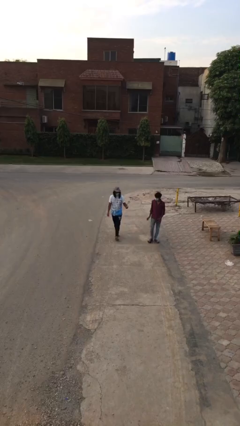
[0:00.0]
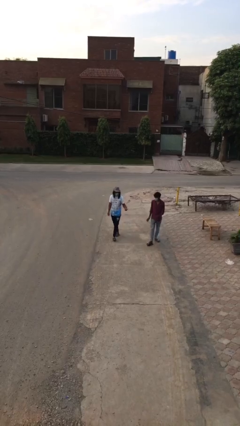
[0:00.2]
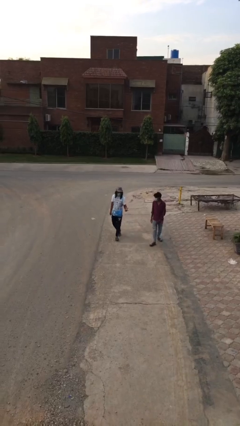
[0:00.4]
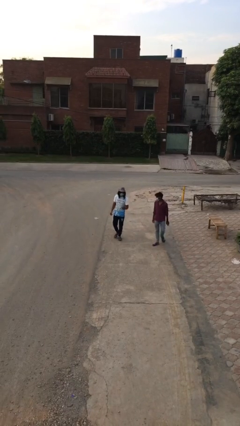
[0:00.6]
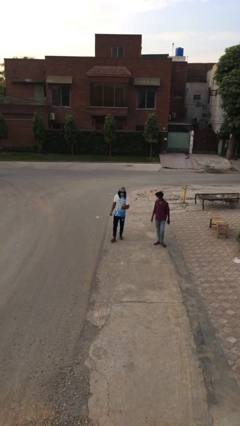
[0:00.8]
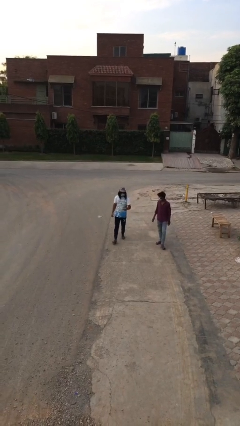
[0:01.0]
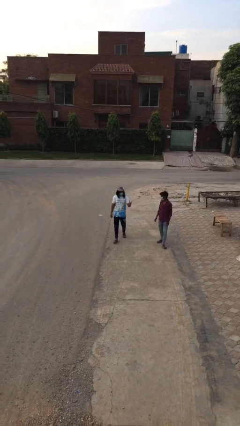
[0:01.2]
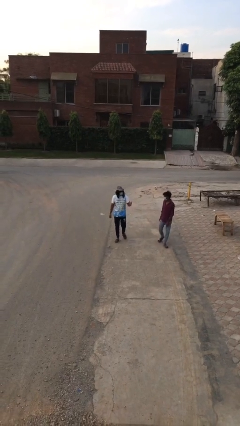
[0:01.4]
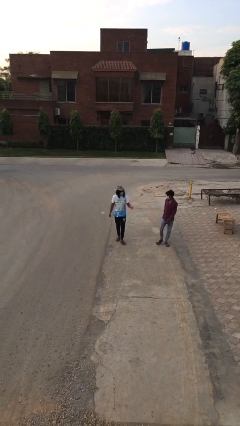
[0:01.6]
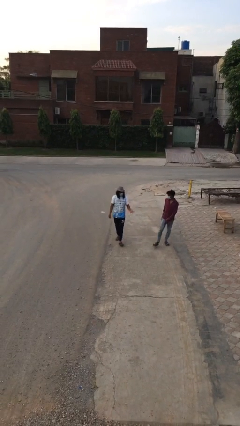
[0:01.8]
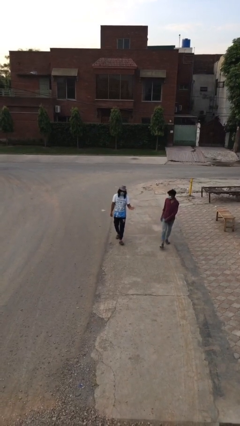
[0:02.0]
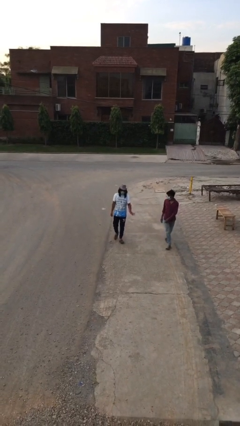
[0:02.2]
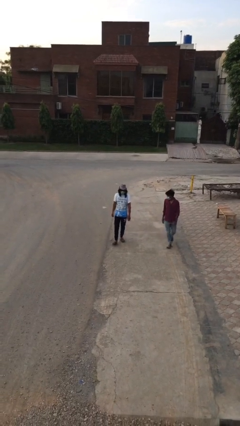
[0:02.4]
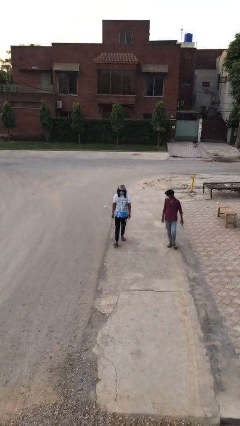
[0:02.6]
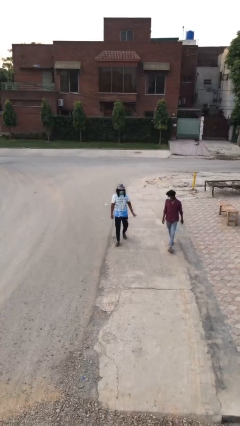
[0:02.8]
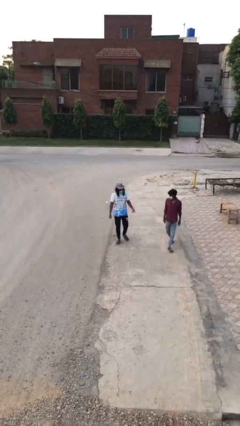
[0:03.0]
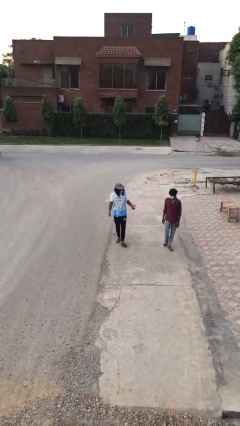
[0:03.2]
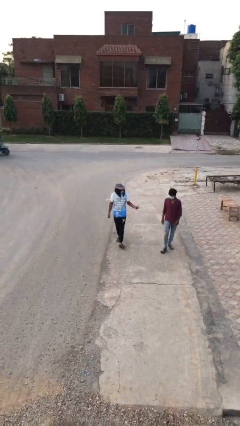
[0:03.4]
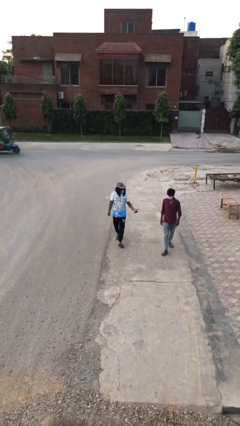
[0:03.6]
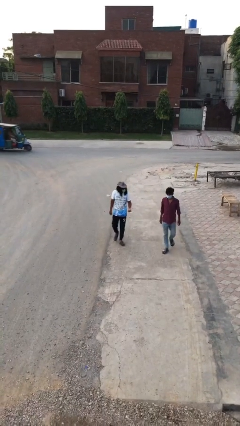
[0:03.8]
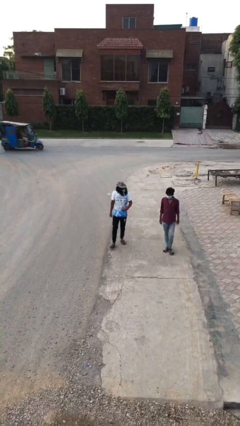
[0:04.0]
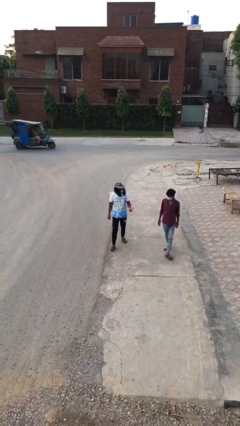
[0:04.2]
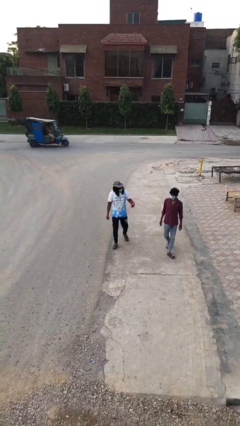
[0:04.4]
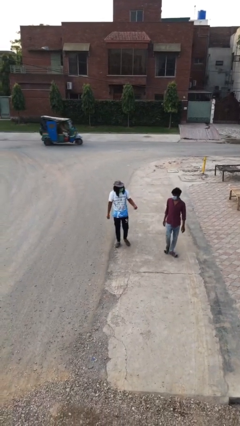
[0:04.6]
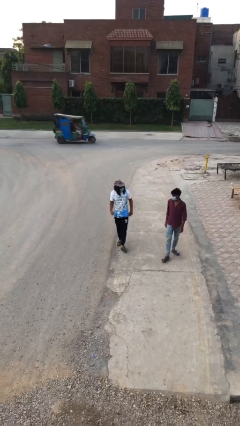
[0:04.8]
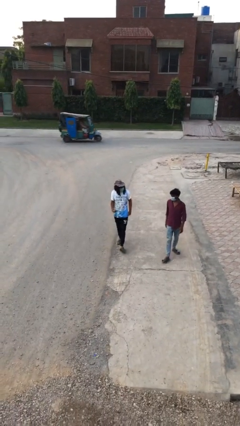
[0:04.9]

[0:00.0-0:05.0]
person talks to person

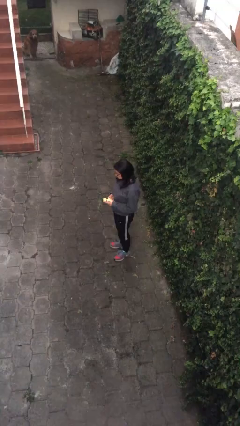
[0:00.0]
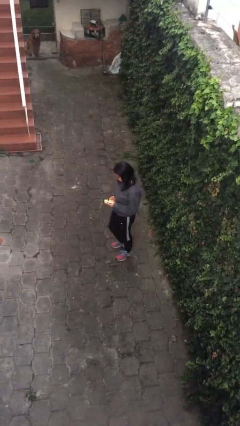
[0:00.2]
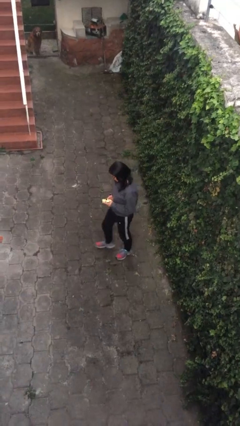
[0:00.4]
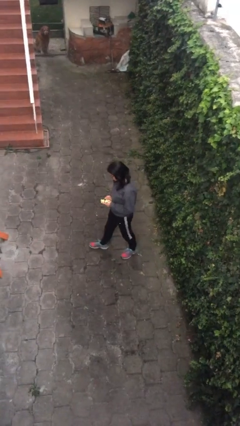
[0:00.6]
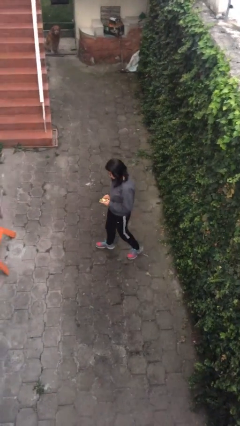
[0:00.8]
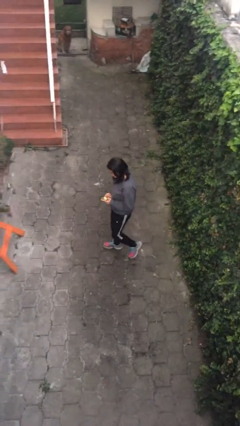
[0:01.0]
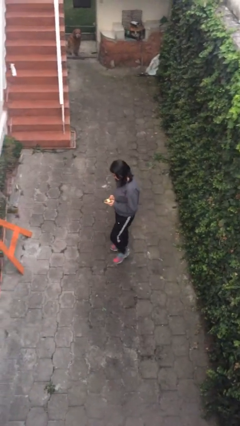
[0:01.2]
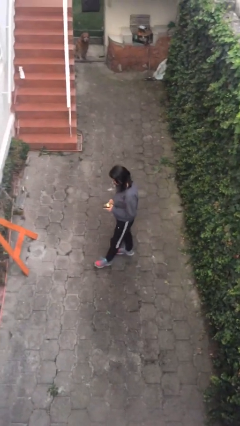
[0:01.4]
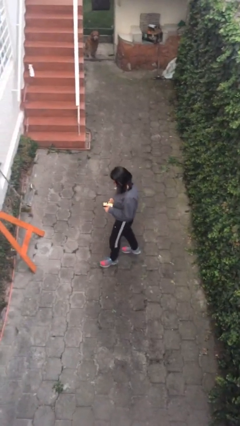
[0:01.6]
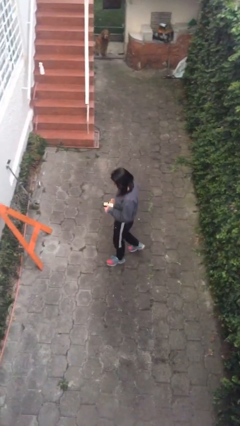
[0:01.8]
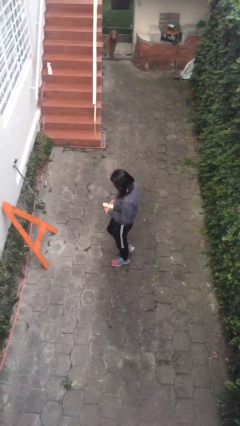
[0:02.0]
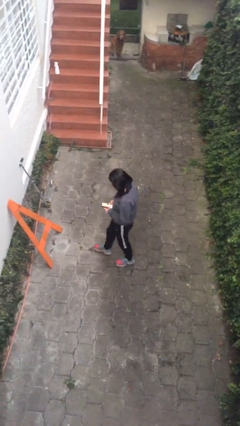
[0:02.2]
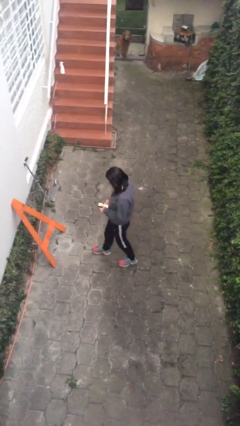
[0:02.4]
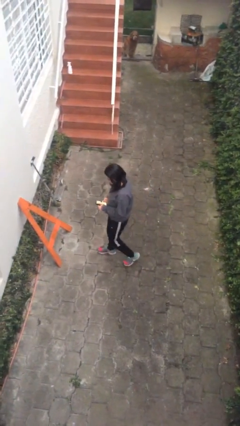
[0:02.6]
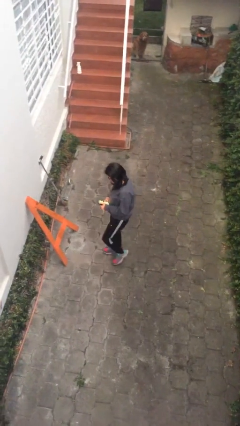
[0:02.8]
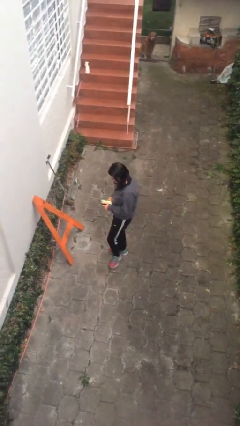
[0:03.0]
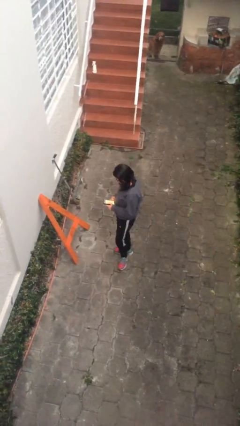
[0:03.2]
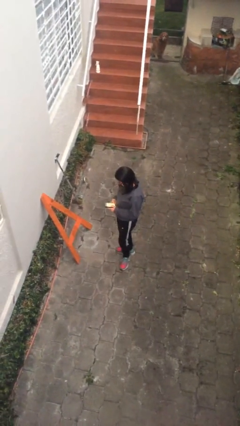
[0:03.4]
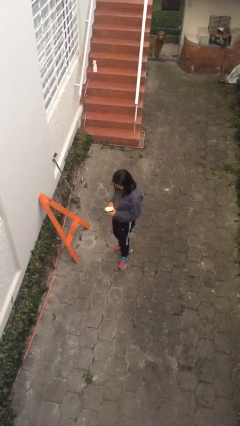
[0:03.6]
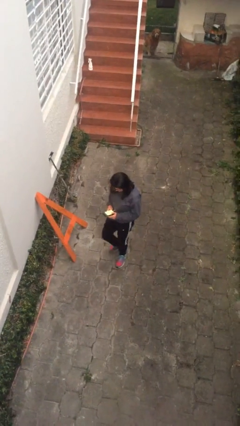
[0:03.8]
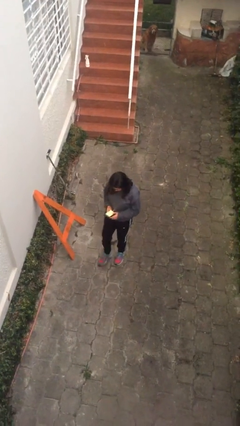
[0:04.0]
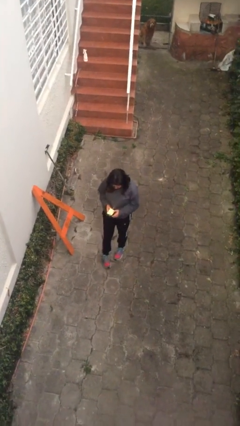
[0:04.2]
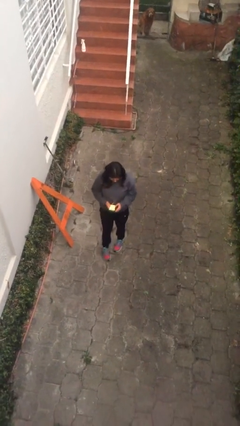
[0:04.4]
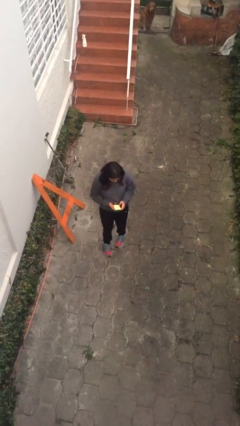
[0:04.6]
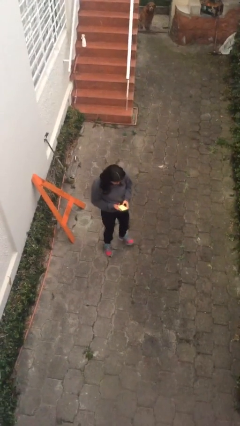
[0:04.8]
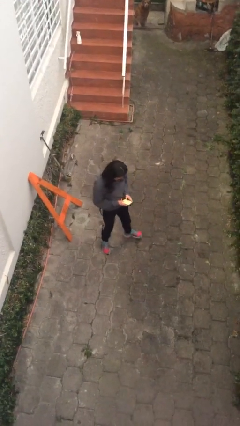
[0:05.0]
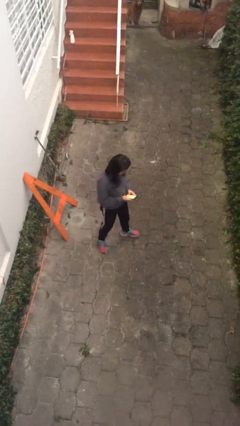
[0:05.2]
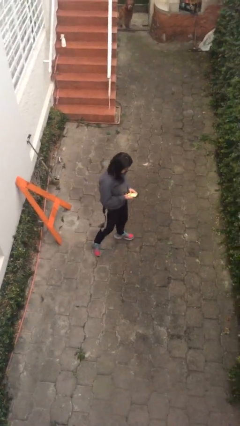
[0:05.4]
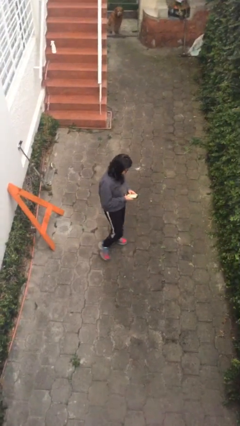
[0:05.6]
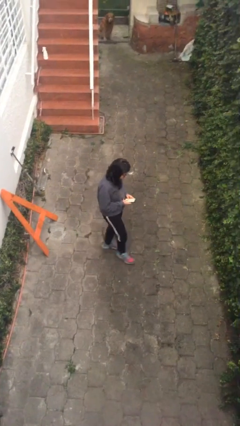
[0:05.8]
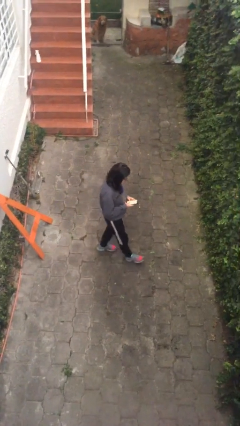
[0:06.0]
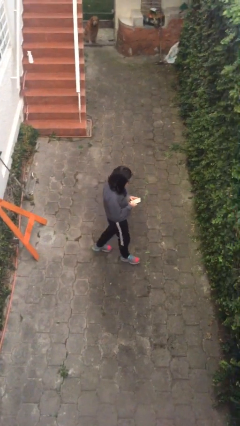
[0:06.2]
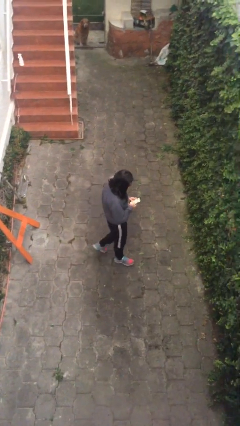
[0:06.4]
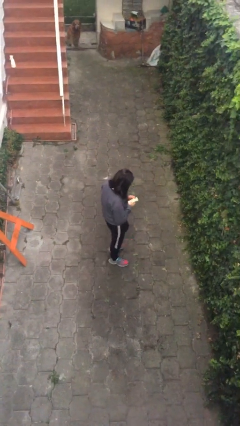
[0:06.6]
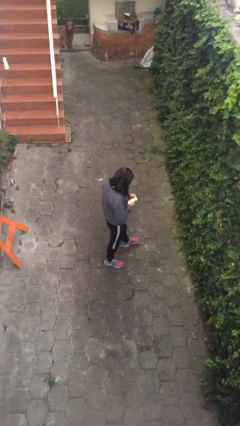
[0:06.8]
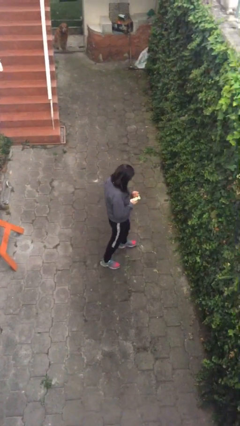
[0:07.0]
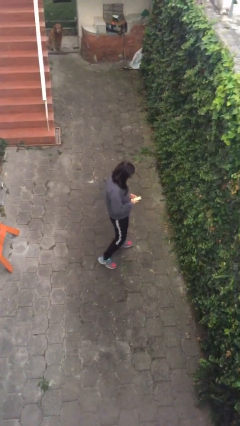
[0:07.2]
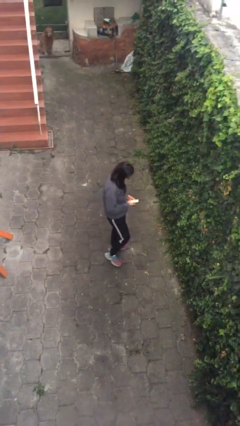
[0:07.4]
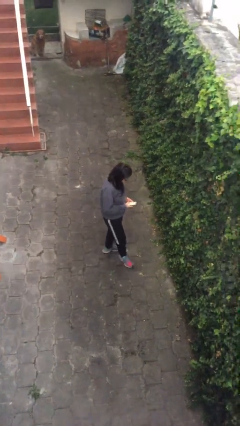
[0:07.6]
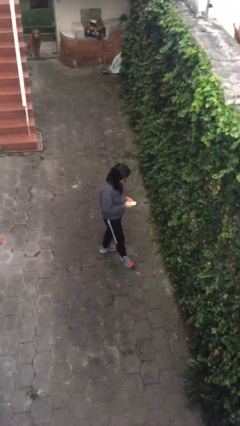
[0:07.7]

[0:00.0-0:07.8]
person texts on phone

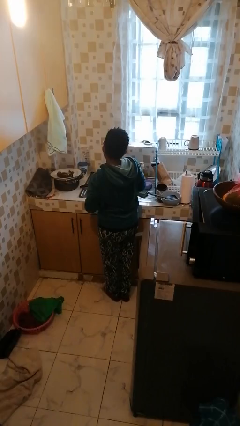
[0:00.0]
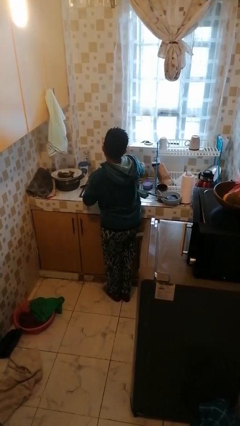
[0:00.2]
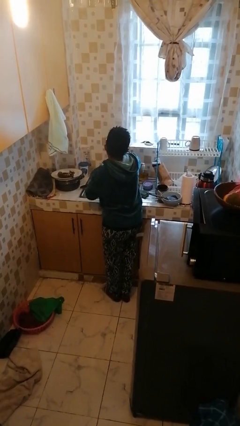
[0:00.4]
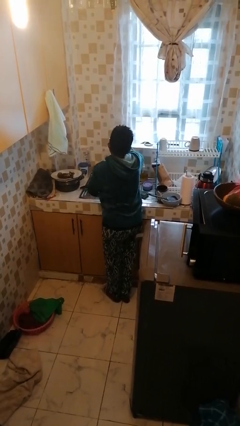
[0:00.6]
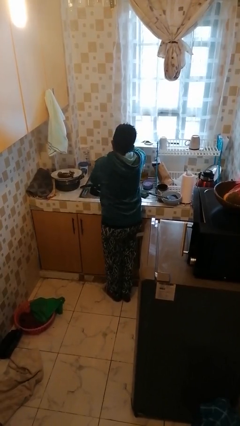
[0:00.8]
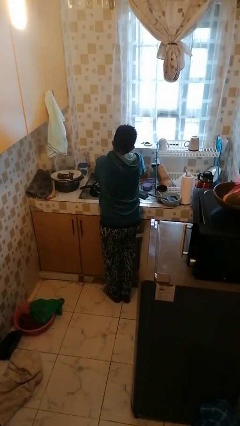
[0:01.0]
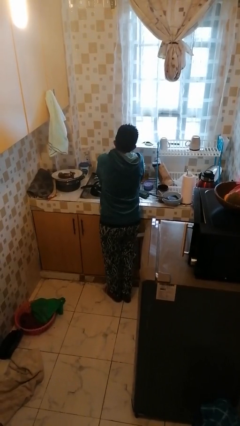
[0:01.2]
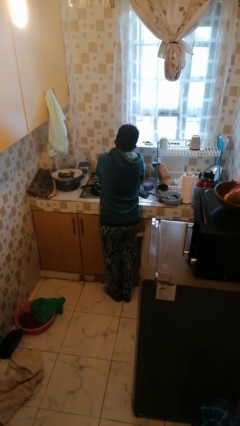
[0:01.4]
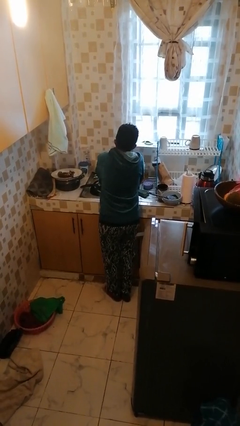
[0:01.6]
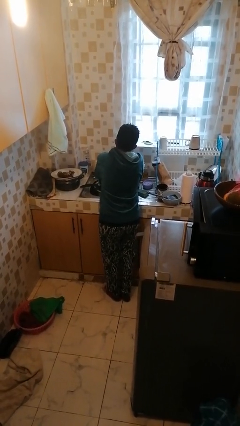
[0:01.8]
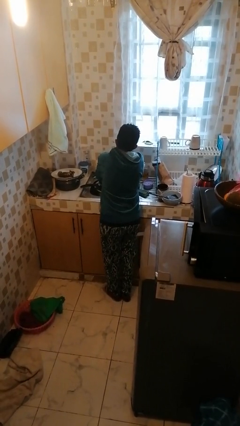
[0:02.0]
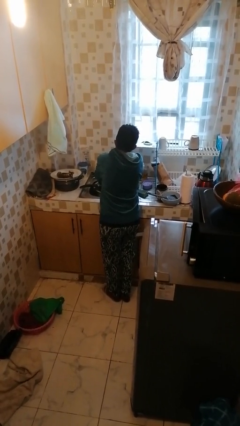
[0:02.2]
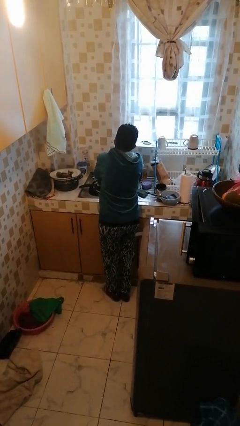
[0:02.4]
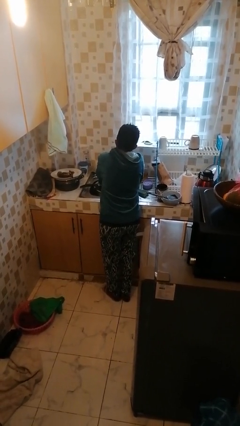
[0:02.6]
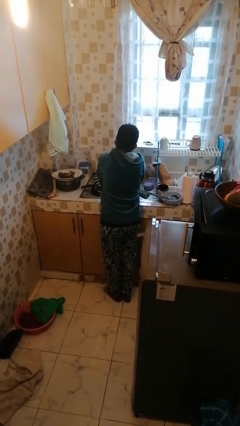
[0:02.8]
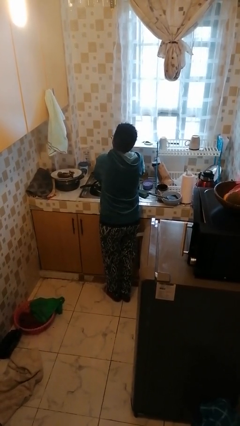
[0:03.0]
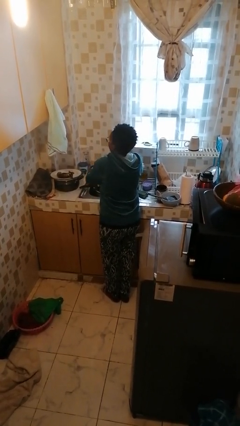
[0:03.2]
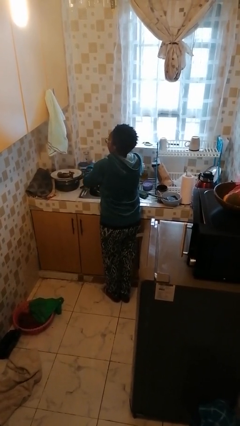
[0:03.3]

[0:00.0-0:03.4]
person washes hands

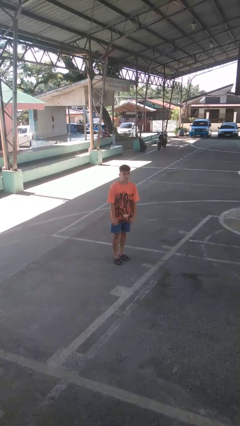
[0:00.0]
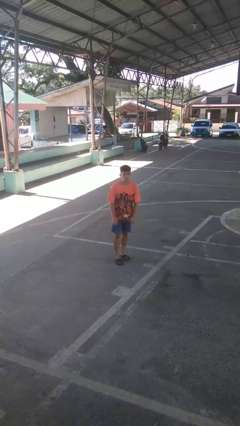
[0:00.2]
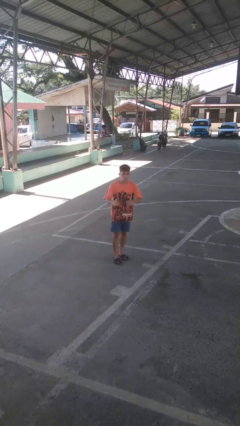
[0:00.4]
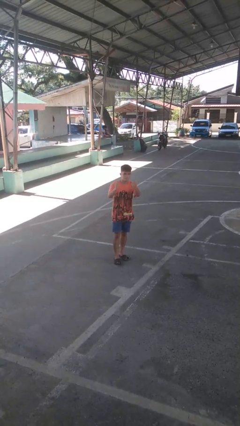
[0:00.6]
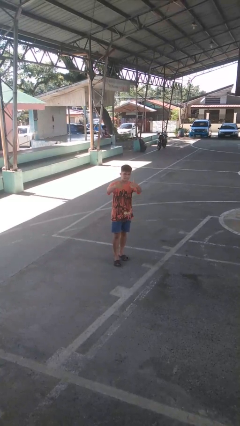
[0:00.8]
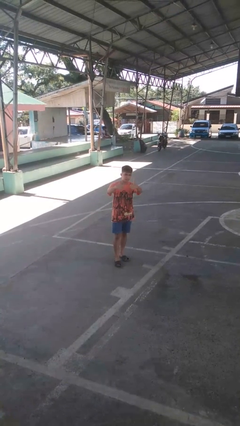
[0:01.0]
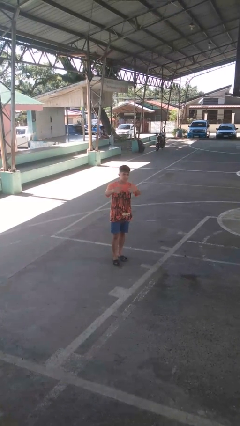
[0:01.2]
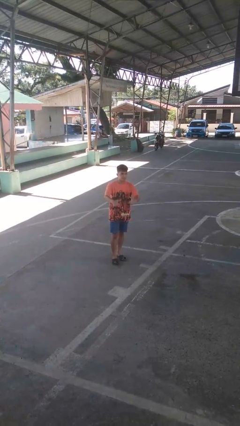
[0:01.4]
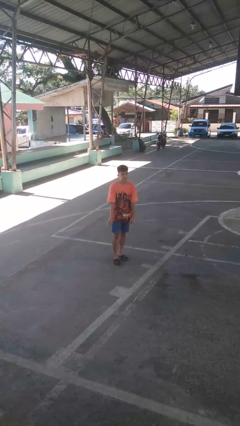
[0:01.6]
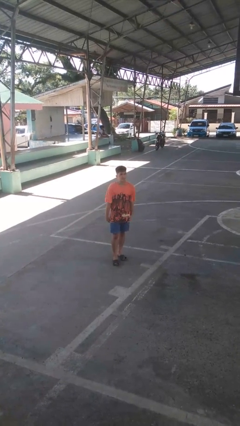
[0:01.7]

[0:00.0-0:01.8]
person gestures thumbs up

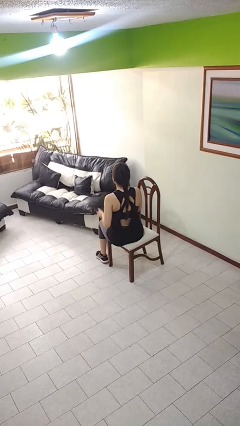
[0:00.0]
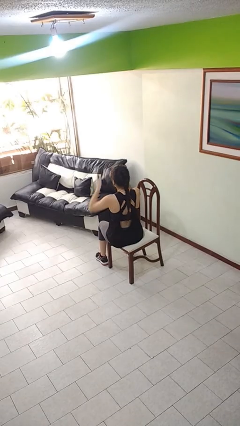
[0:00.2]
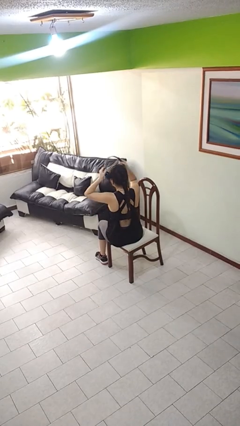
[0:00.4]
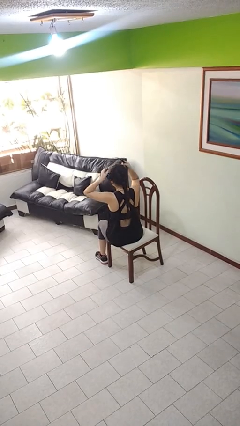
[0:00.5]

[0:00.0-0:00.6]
person puts on headphones
